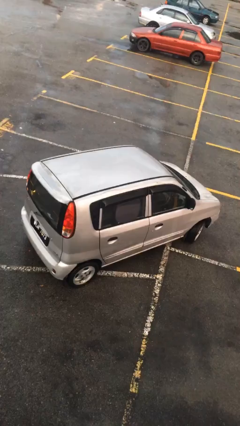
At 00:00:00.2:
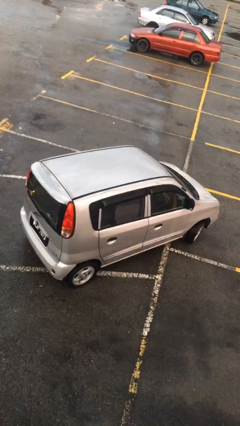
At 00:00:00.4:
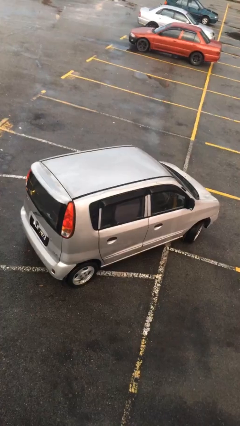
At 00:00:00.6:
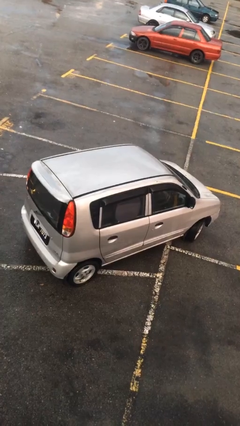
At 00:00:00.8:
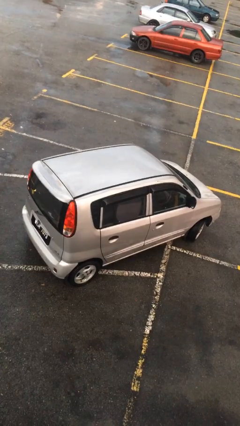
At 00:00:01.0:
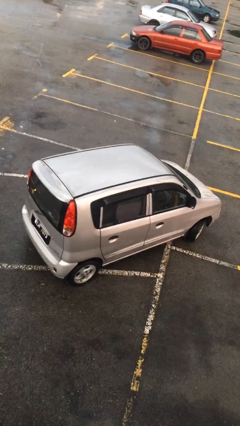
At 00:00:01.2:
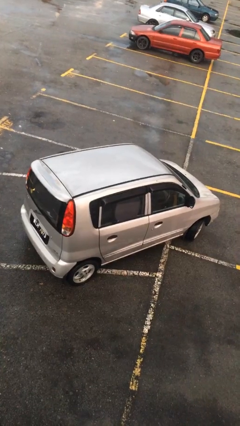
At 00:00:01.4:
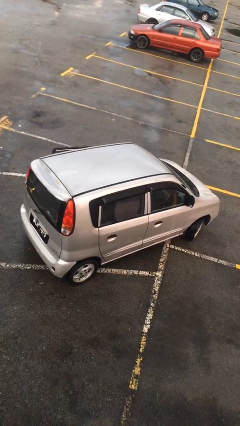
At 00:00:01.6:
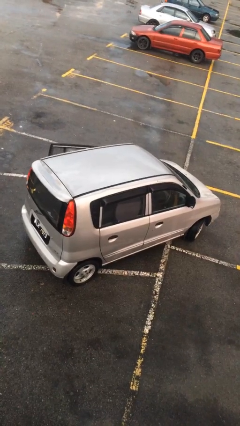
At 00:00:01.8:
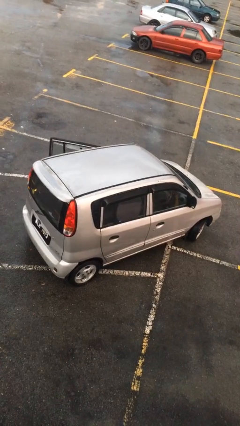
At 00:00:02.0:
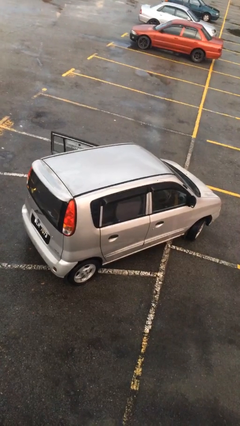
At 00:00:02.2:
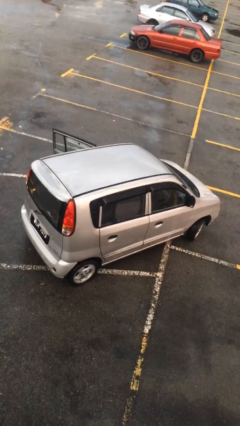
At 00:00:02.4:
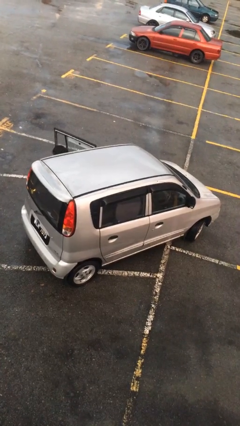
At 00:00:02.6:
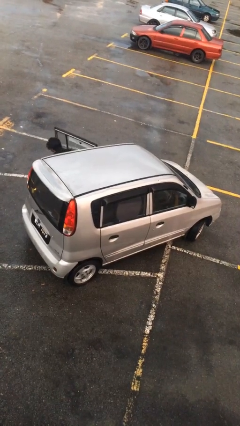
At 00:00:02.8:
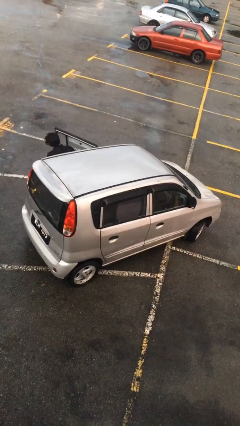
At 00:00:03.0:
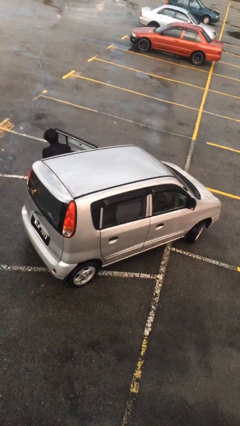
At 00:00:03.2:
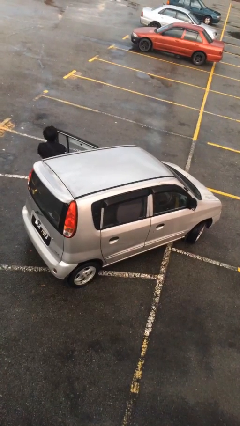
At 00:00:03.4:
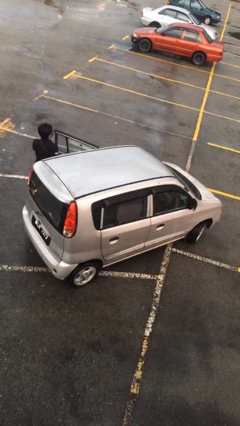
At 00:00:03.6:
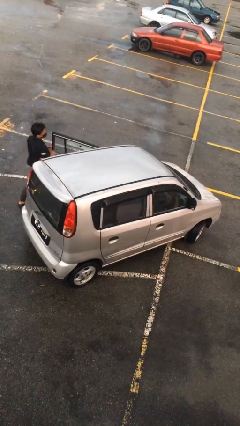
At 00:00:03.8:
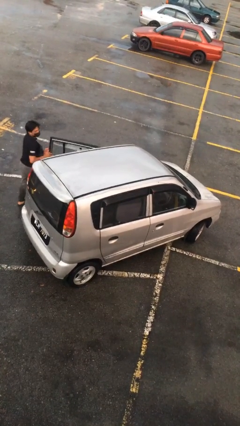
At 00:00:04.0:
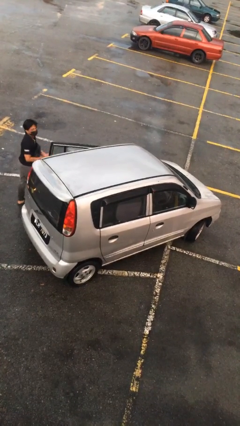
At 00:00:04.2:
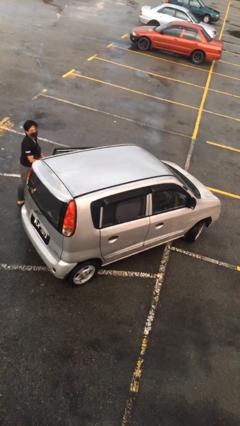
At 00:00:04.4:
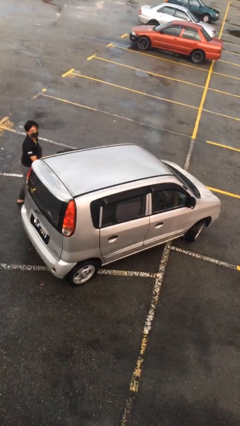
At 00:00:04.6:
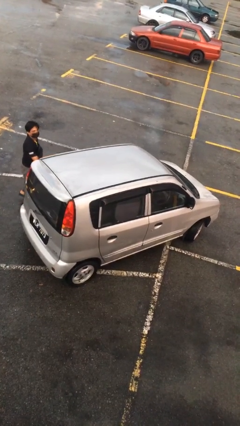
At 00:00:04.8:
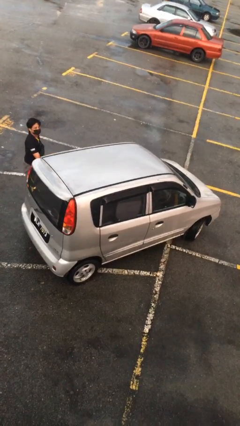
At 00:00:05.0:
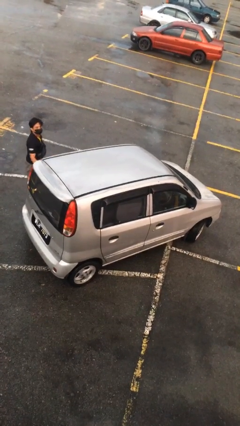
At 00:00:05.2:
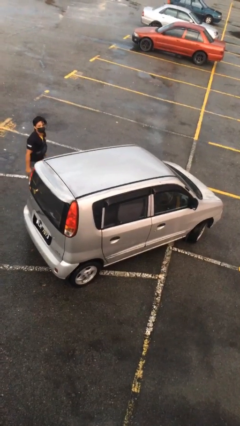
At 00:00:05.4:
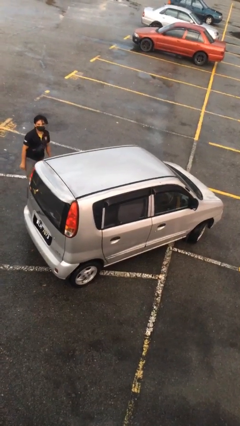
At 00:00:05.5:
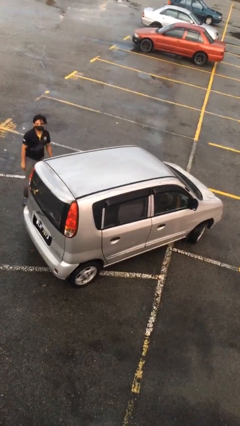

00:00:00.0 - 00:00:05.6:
car drops off person

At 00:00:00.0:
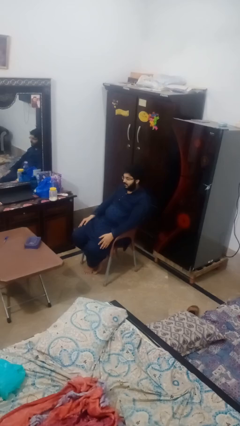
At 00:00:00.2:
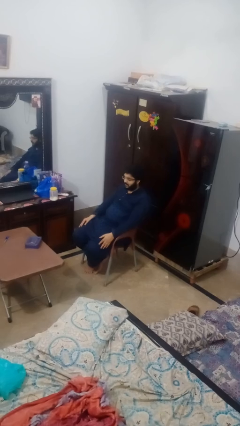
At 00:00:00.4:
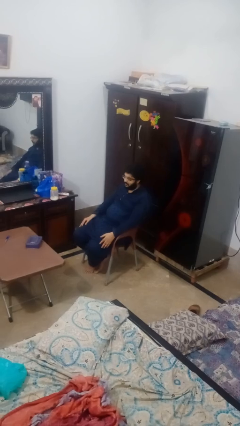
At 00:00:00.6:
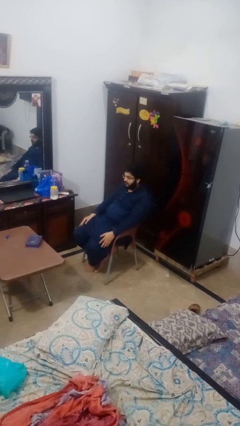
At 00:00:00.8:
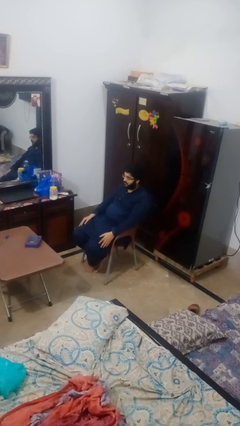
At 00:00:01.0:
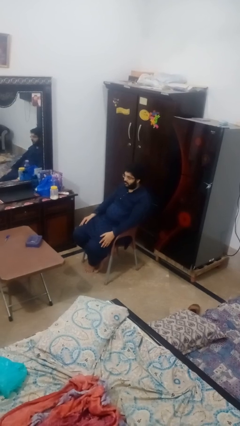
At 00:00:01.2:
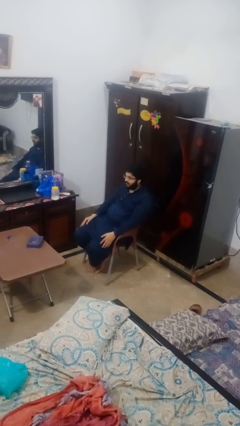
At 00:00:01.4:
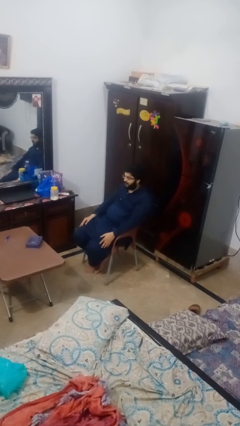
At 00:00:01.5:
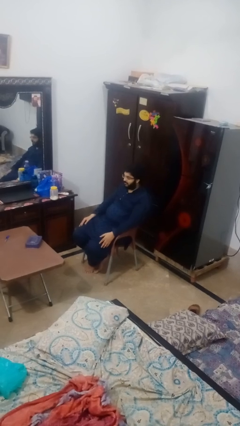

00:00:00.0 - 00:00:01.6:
person shakes head

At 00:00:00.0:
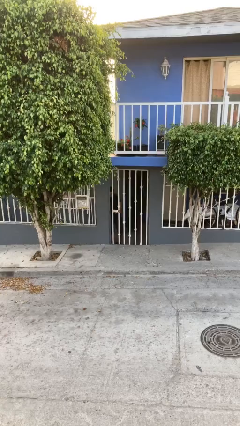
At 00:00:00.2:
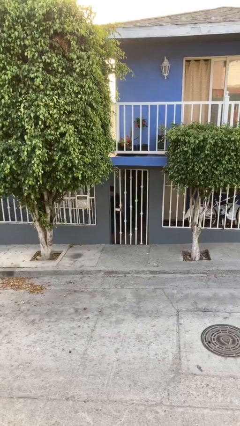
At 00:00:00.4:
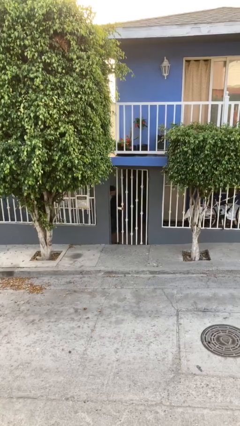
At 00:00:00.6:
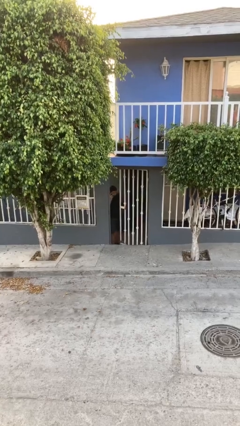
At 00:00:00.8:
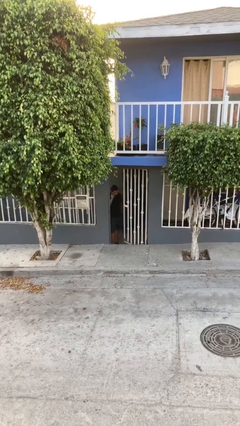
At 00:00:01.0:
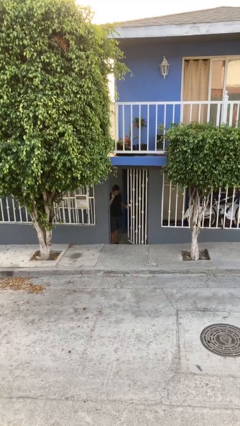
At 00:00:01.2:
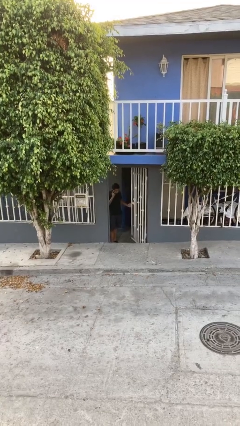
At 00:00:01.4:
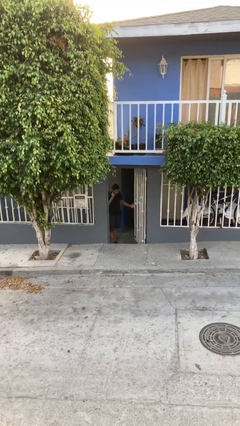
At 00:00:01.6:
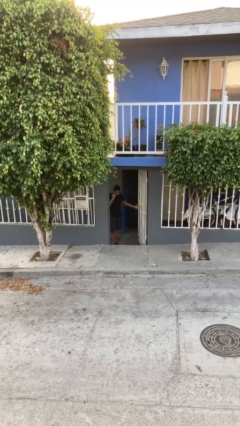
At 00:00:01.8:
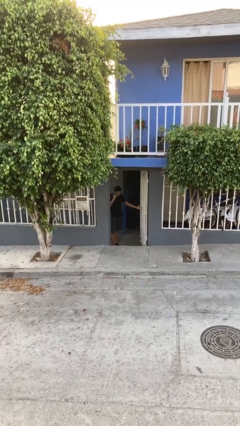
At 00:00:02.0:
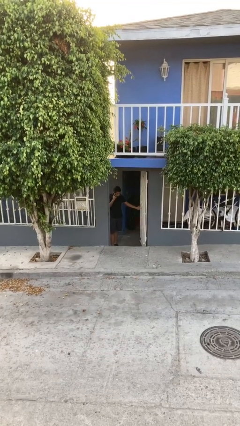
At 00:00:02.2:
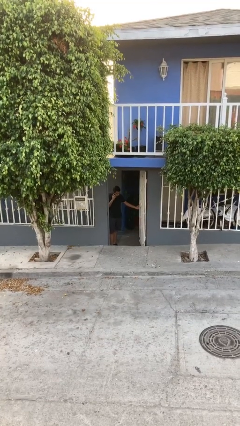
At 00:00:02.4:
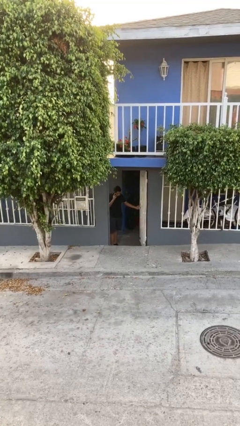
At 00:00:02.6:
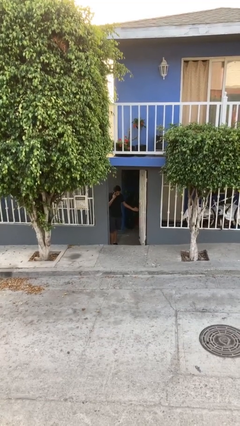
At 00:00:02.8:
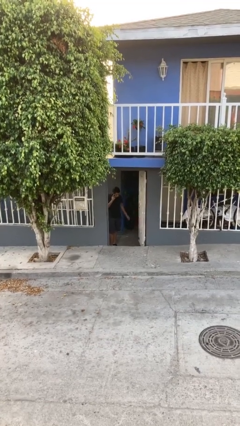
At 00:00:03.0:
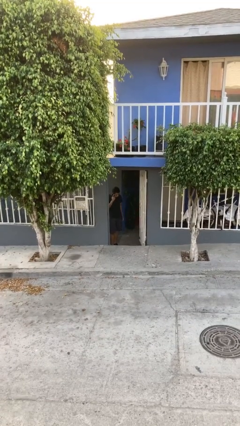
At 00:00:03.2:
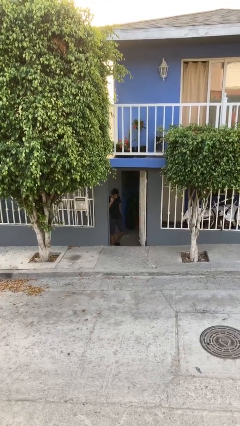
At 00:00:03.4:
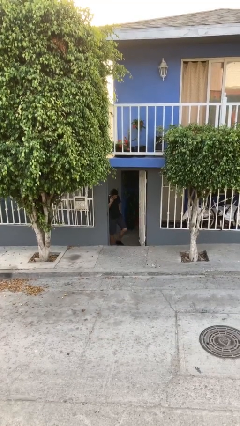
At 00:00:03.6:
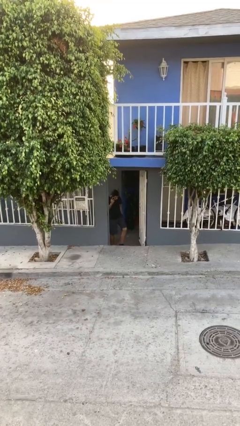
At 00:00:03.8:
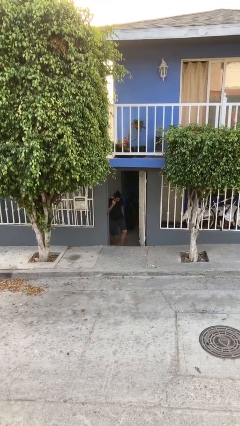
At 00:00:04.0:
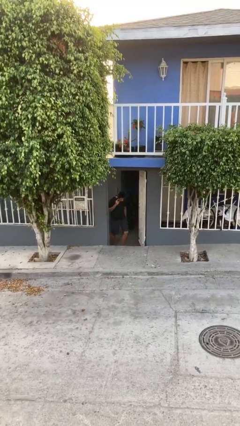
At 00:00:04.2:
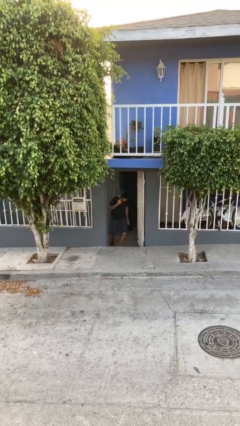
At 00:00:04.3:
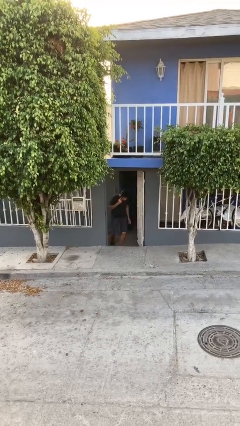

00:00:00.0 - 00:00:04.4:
person opens facility door

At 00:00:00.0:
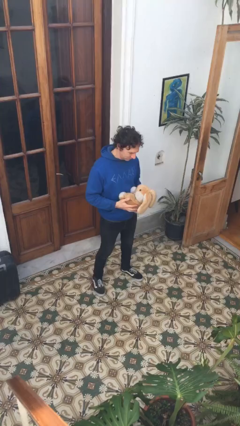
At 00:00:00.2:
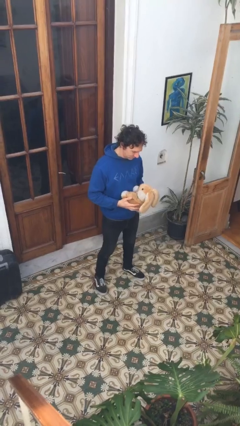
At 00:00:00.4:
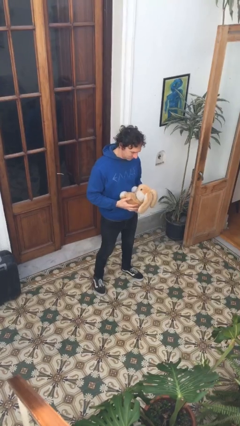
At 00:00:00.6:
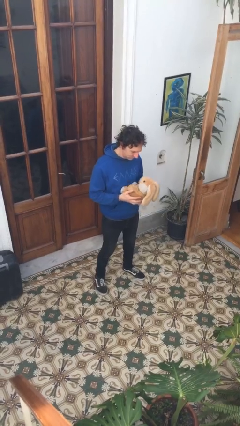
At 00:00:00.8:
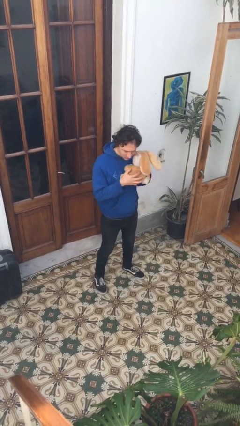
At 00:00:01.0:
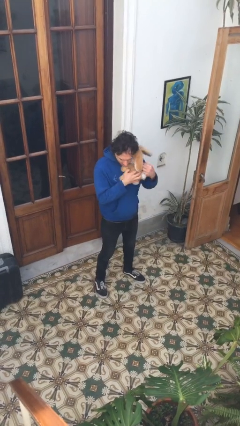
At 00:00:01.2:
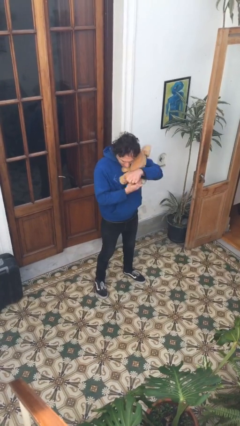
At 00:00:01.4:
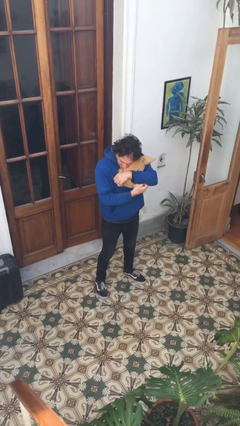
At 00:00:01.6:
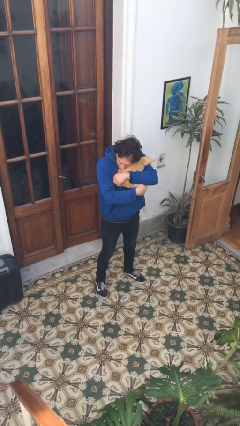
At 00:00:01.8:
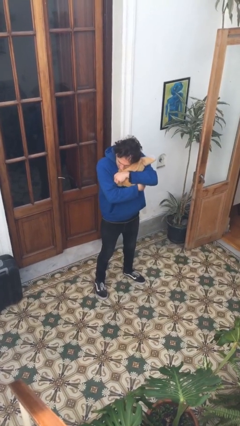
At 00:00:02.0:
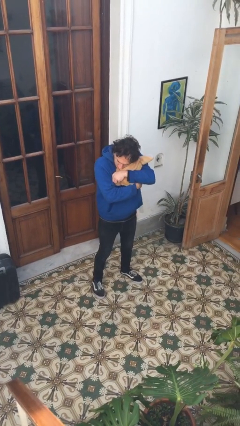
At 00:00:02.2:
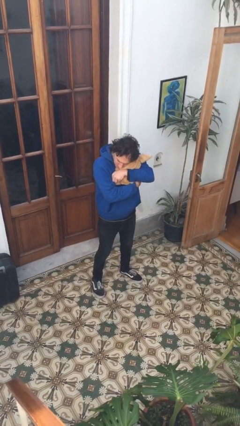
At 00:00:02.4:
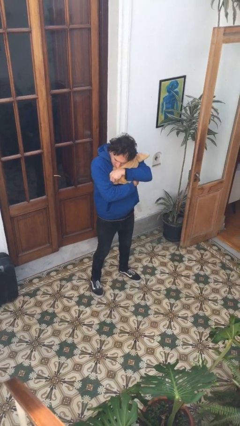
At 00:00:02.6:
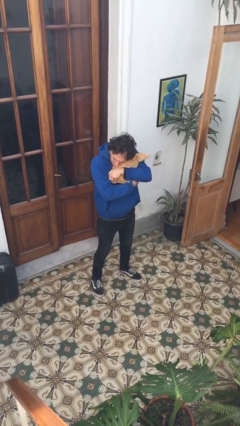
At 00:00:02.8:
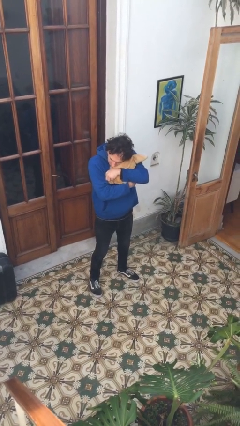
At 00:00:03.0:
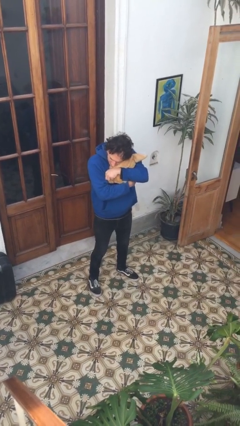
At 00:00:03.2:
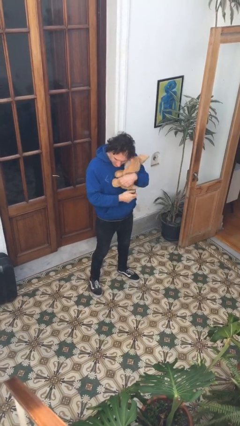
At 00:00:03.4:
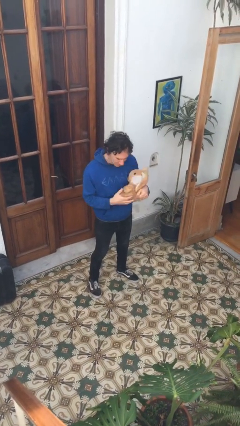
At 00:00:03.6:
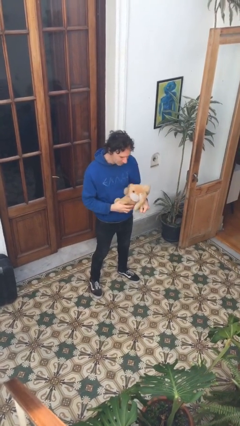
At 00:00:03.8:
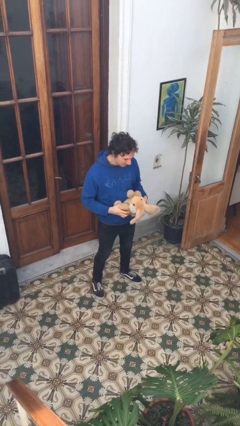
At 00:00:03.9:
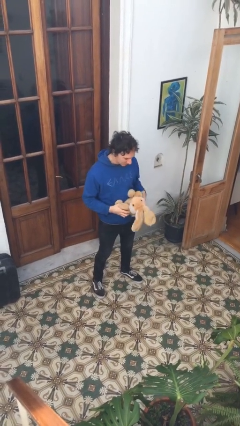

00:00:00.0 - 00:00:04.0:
person hugs stuffed animal

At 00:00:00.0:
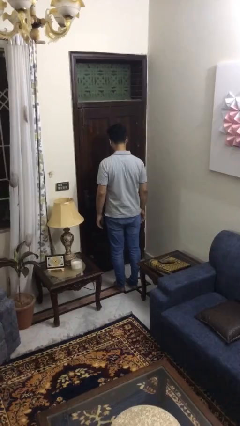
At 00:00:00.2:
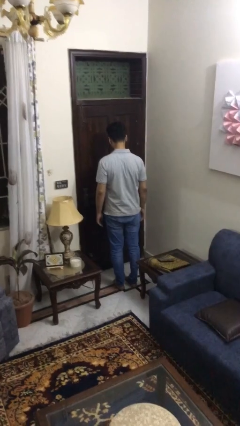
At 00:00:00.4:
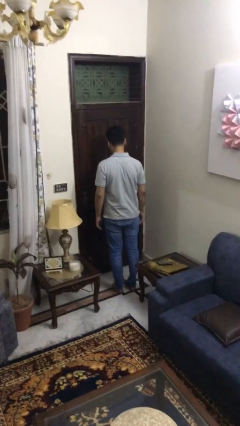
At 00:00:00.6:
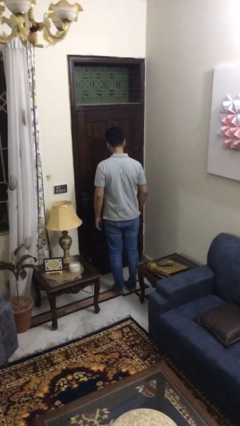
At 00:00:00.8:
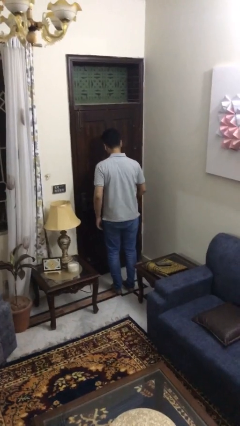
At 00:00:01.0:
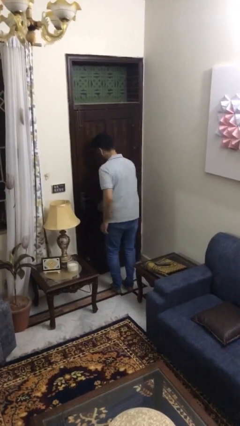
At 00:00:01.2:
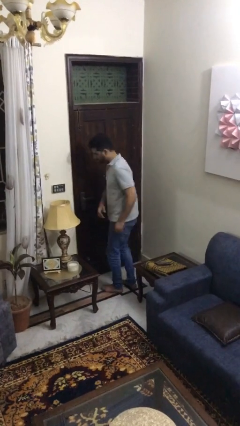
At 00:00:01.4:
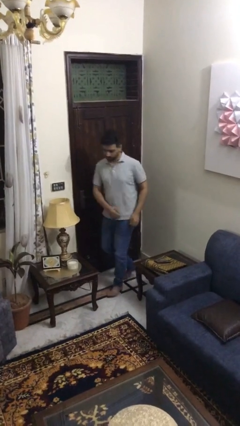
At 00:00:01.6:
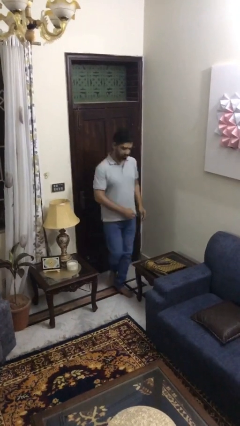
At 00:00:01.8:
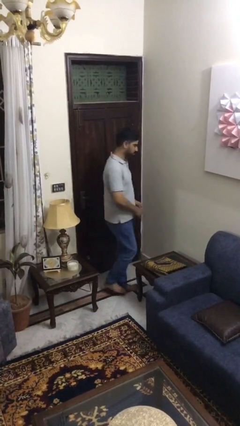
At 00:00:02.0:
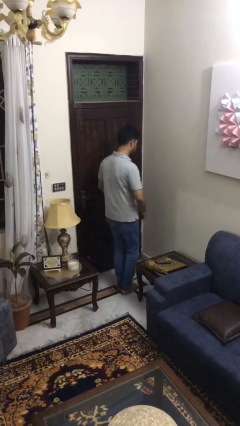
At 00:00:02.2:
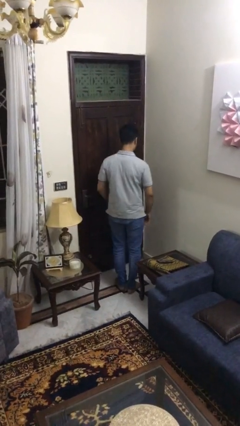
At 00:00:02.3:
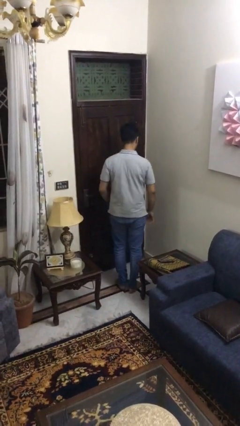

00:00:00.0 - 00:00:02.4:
person twirls
